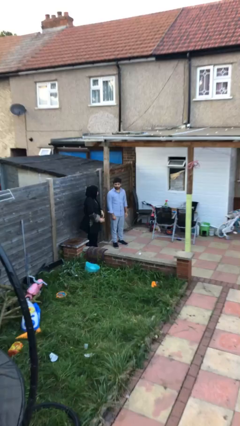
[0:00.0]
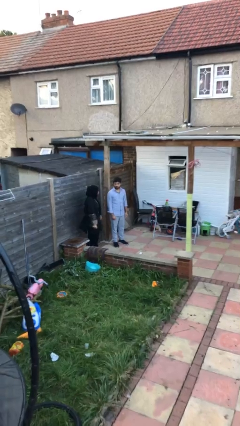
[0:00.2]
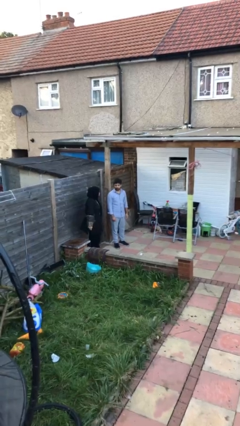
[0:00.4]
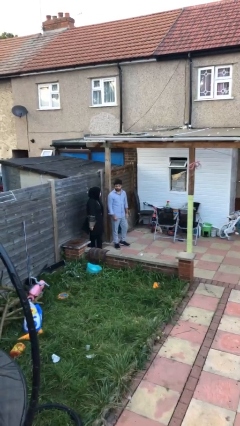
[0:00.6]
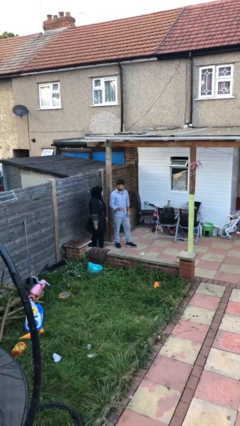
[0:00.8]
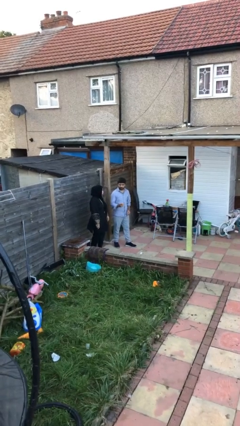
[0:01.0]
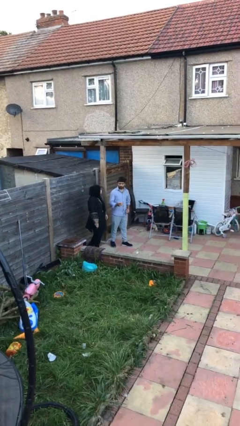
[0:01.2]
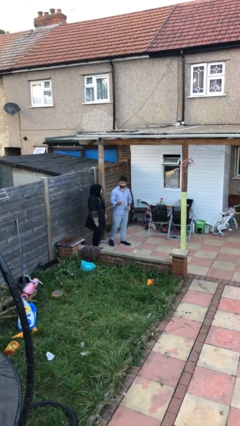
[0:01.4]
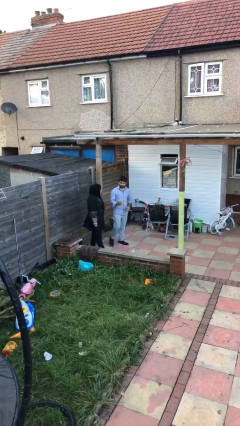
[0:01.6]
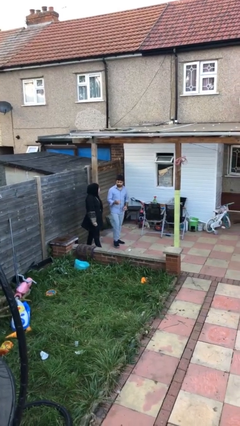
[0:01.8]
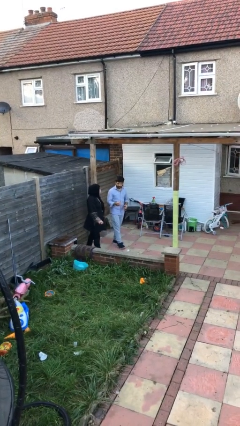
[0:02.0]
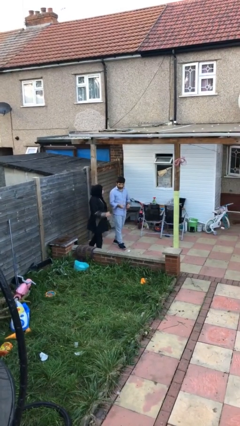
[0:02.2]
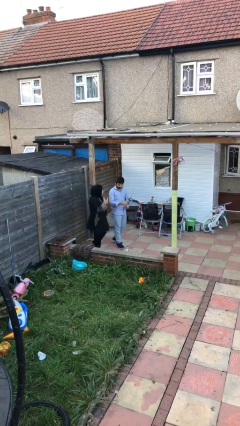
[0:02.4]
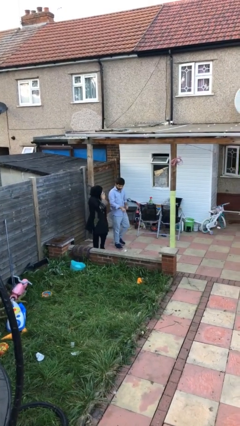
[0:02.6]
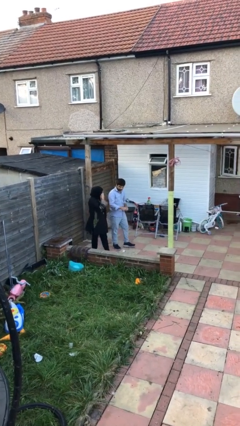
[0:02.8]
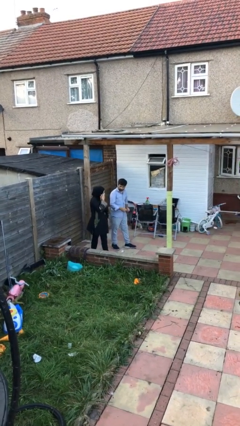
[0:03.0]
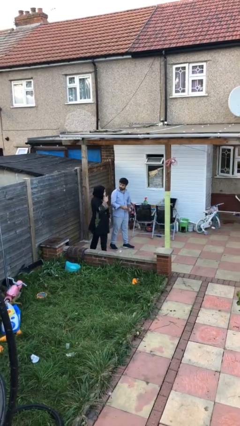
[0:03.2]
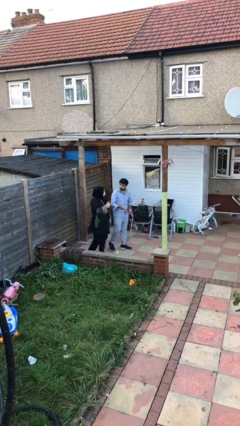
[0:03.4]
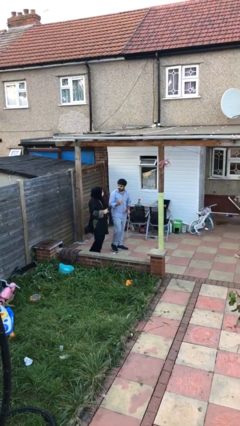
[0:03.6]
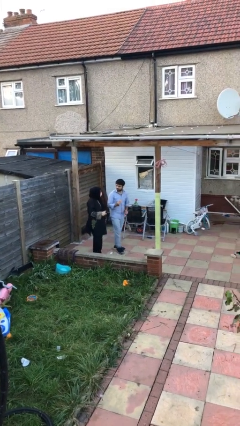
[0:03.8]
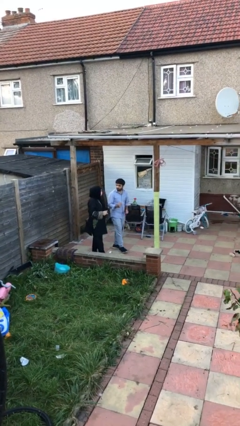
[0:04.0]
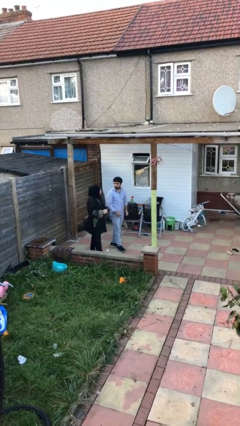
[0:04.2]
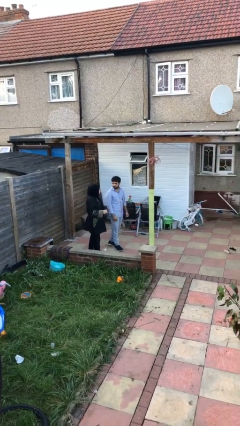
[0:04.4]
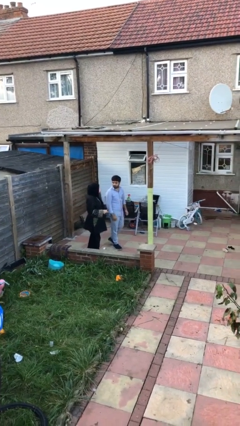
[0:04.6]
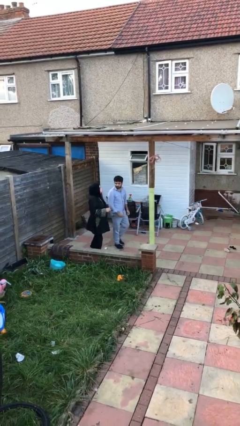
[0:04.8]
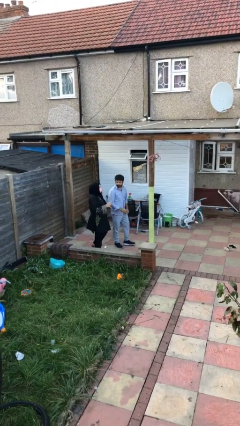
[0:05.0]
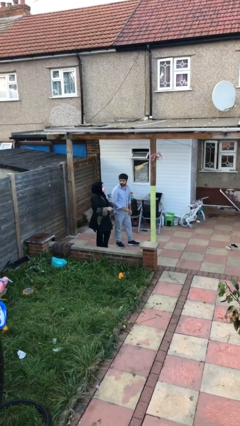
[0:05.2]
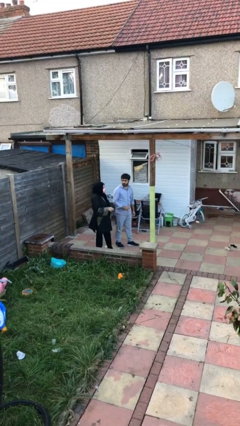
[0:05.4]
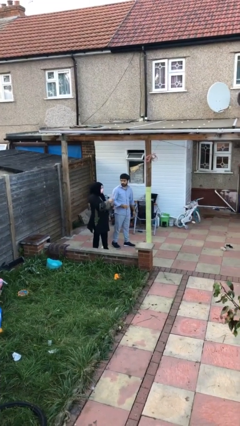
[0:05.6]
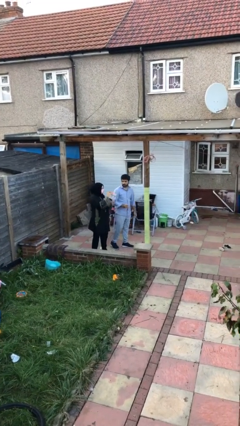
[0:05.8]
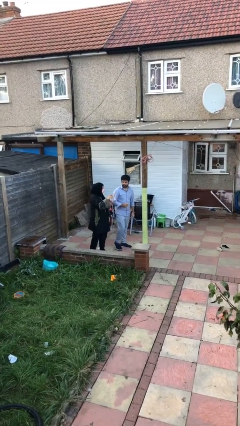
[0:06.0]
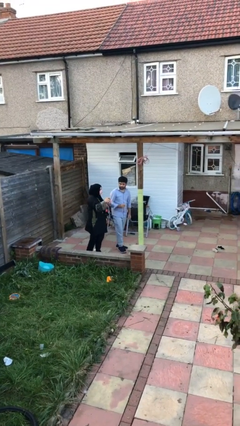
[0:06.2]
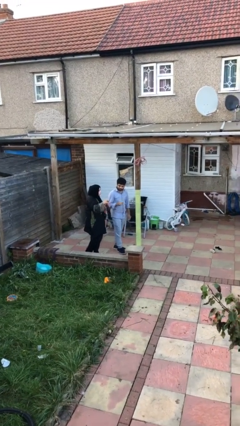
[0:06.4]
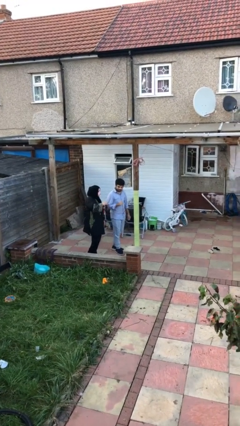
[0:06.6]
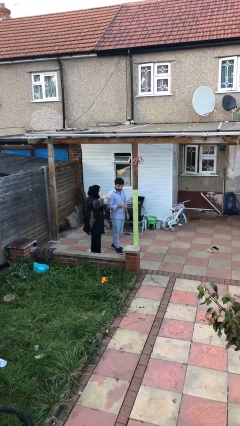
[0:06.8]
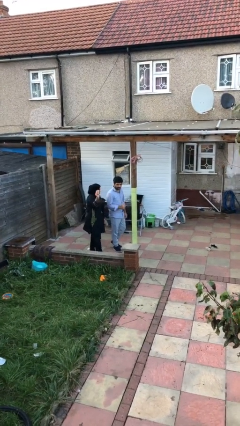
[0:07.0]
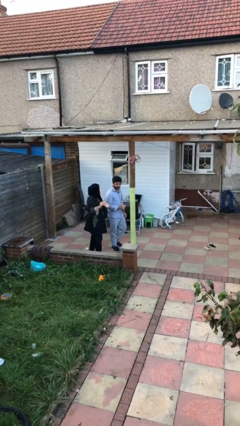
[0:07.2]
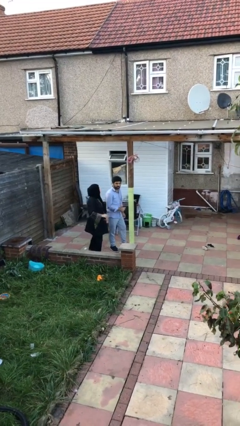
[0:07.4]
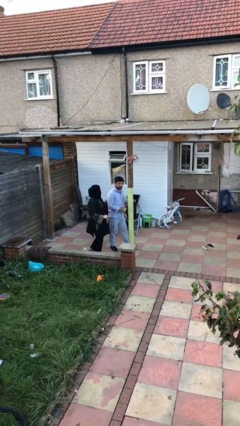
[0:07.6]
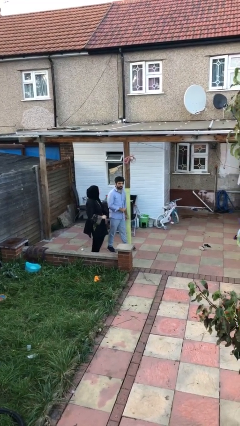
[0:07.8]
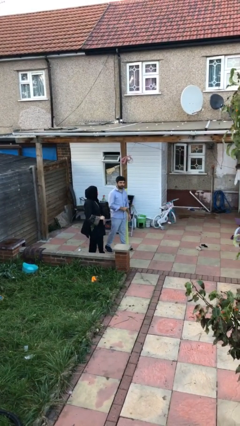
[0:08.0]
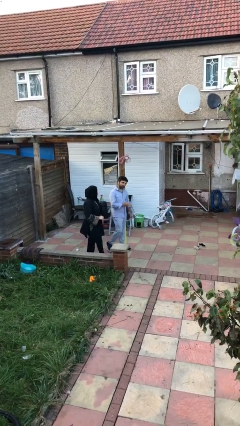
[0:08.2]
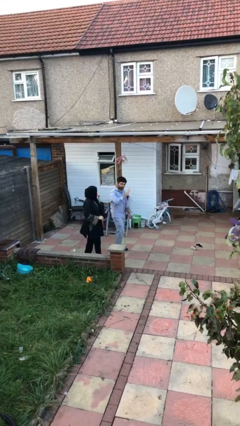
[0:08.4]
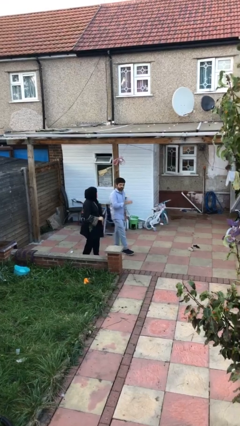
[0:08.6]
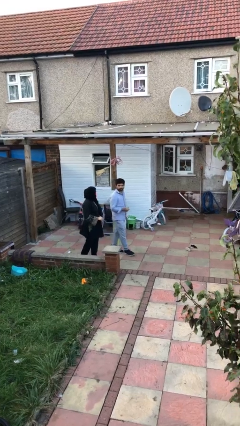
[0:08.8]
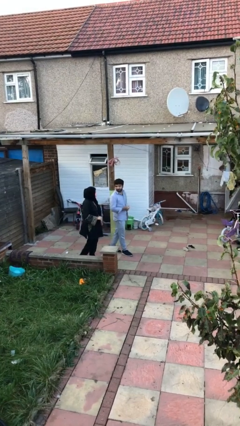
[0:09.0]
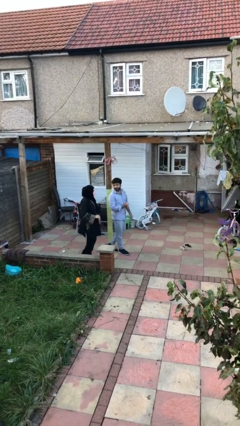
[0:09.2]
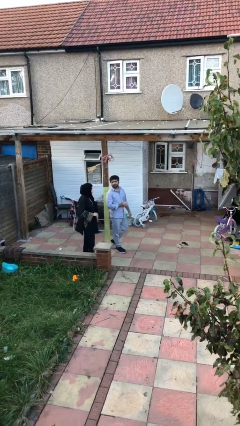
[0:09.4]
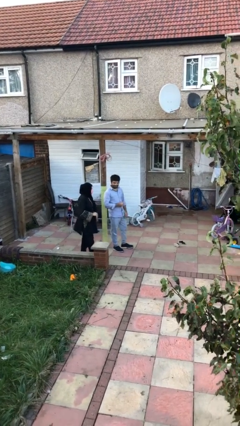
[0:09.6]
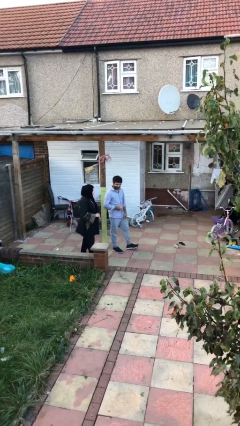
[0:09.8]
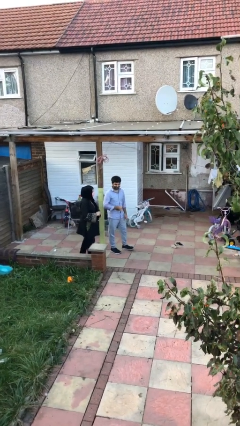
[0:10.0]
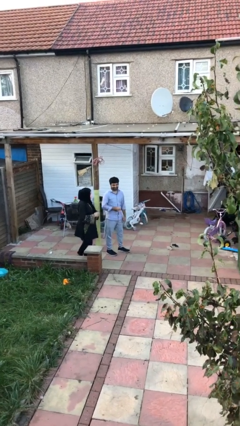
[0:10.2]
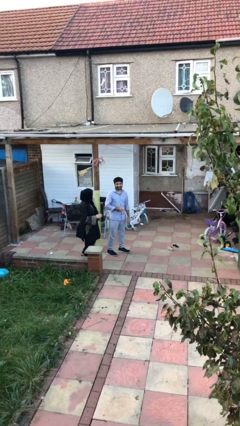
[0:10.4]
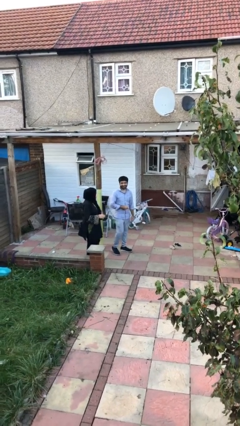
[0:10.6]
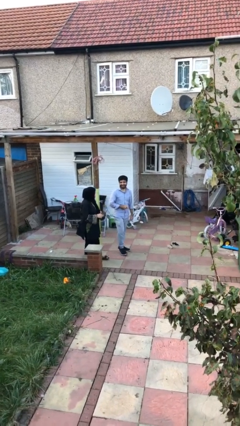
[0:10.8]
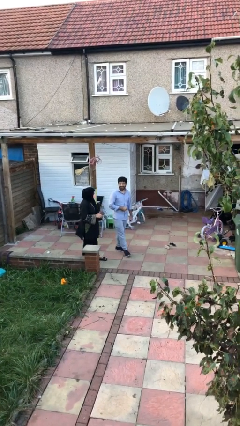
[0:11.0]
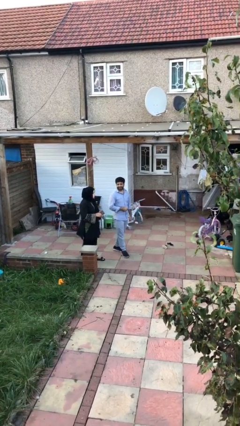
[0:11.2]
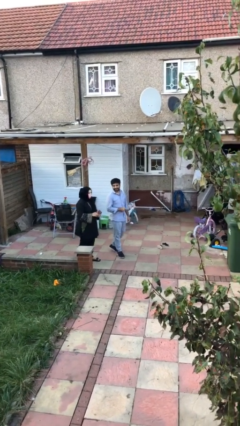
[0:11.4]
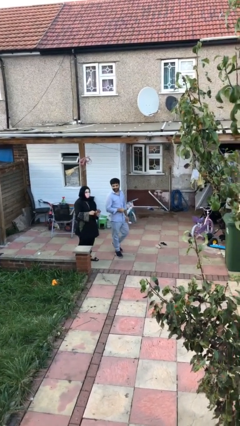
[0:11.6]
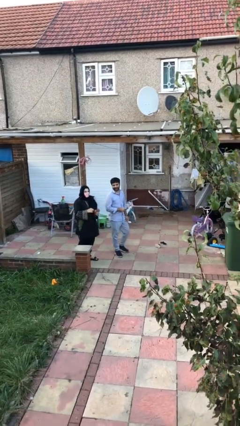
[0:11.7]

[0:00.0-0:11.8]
person talks to person

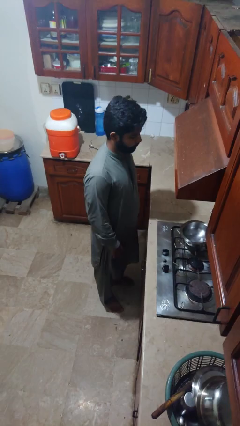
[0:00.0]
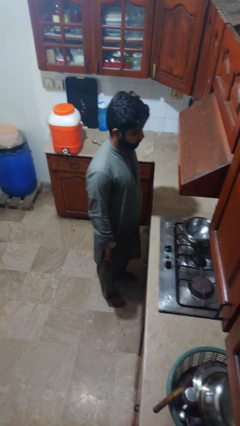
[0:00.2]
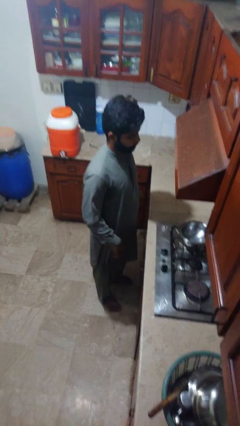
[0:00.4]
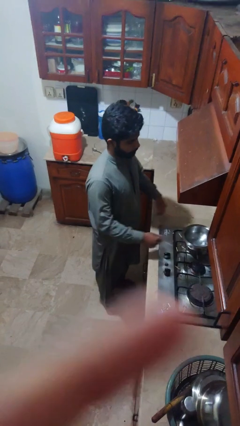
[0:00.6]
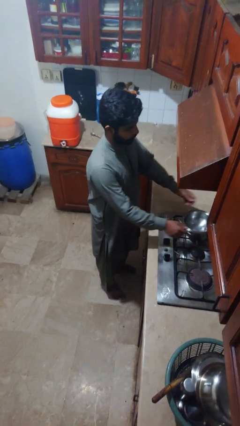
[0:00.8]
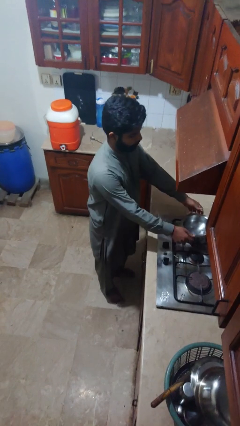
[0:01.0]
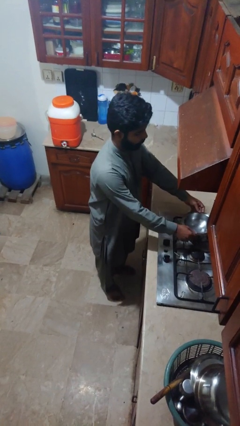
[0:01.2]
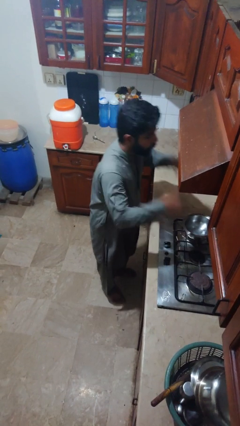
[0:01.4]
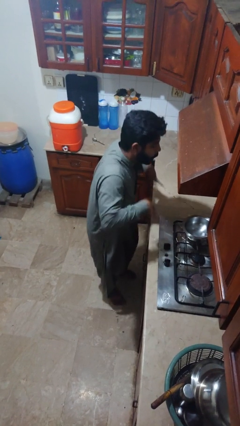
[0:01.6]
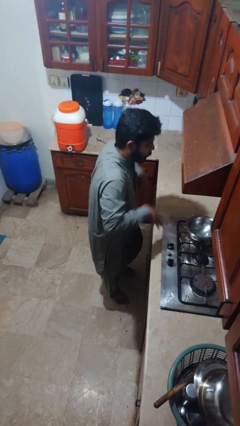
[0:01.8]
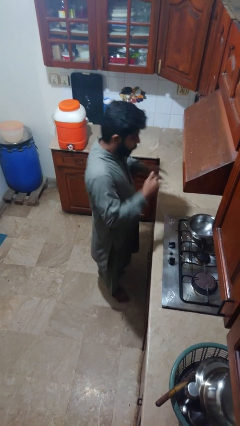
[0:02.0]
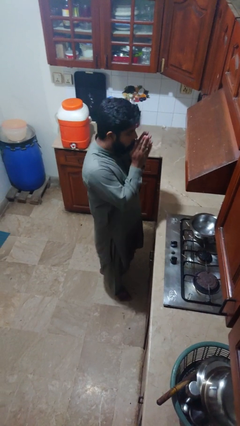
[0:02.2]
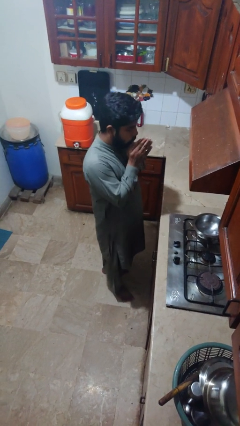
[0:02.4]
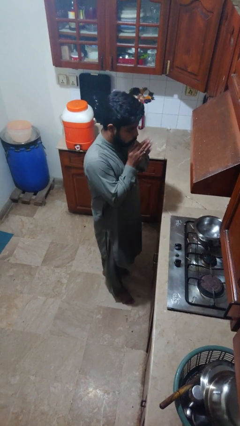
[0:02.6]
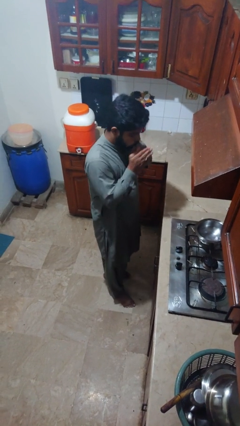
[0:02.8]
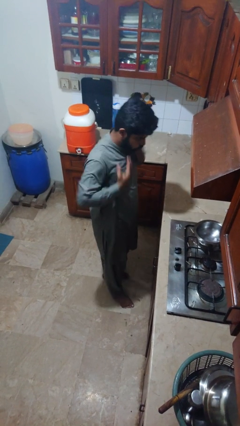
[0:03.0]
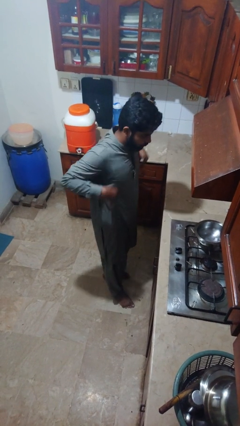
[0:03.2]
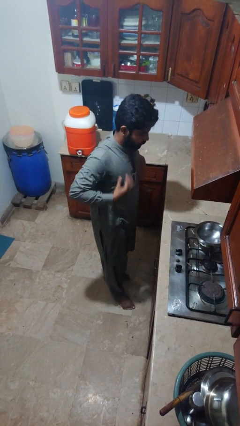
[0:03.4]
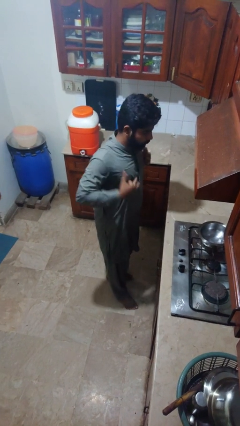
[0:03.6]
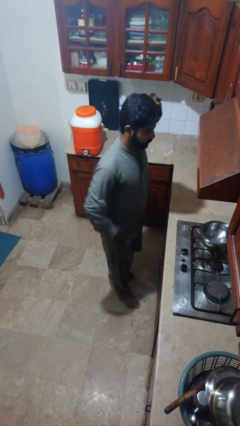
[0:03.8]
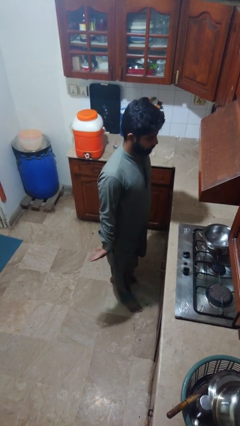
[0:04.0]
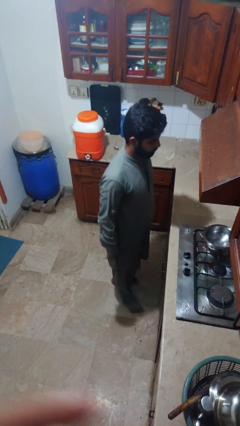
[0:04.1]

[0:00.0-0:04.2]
person burns hand

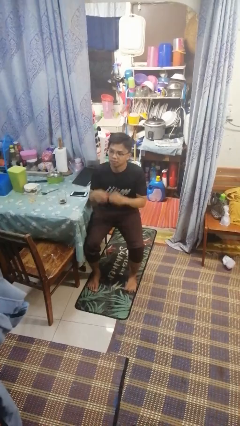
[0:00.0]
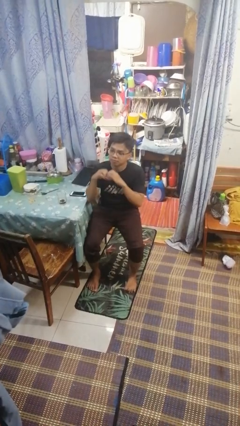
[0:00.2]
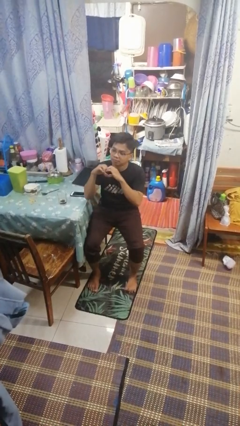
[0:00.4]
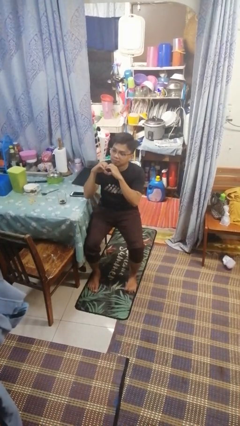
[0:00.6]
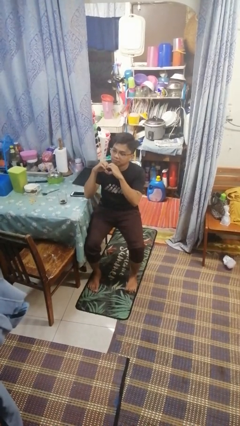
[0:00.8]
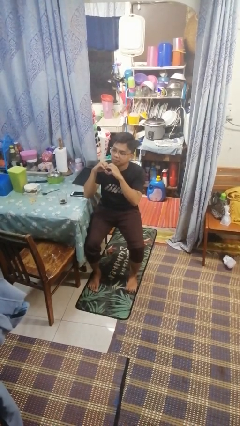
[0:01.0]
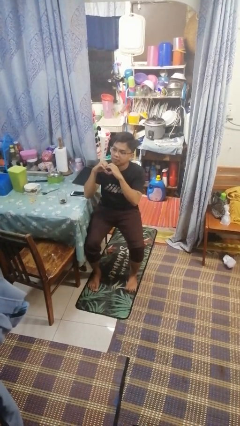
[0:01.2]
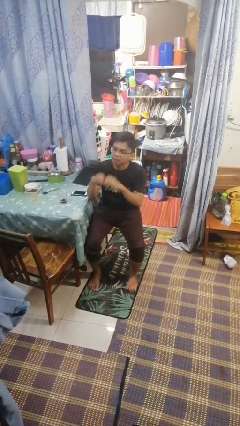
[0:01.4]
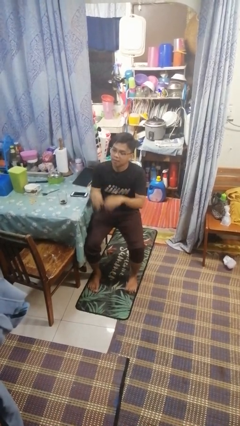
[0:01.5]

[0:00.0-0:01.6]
person gestures heart
